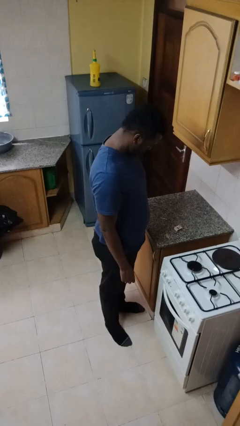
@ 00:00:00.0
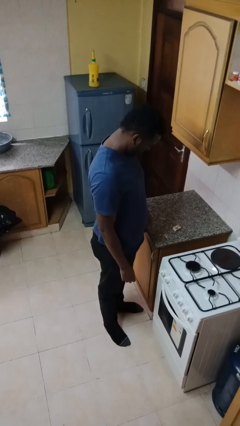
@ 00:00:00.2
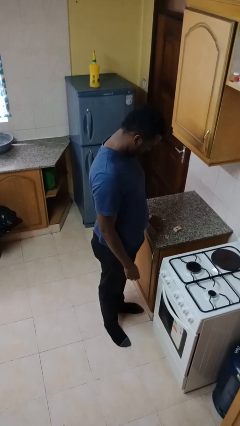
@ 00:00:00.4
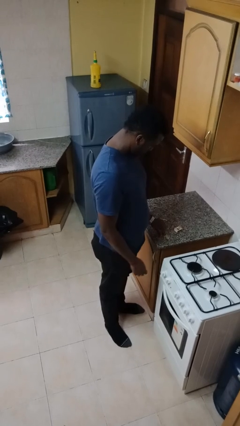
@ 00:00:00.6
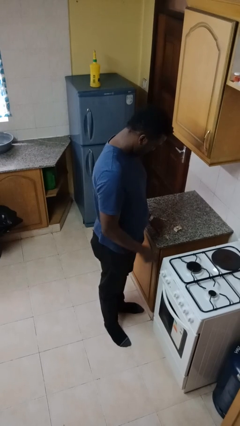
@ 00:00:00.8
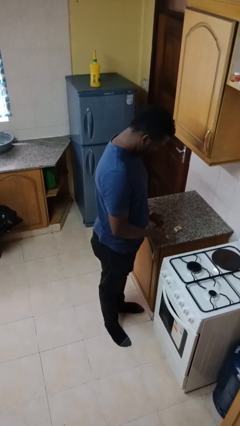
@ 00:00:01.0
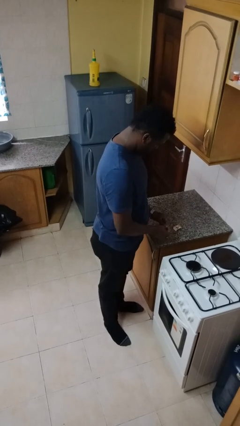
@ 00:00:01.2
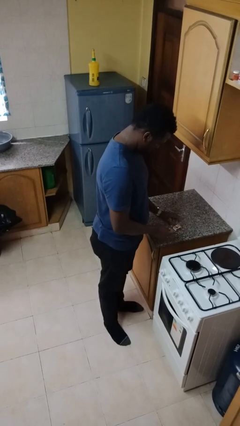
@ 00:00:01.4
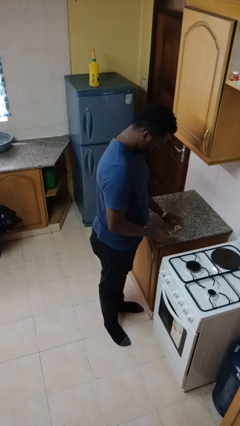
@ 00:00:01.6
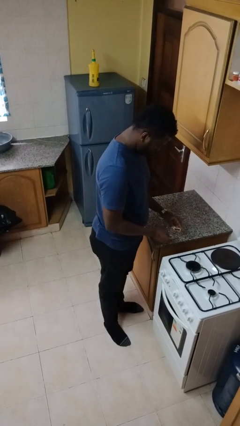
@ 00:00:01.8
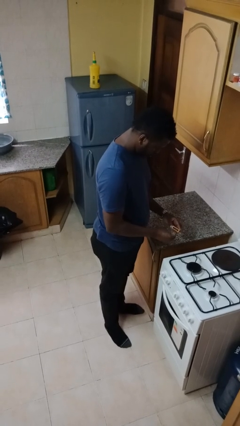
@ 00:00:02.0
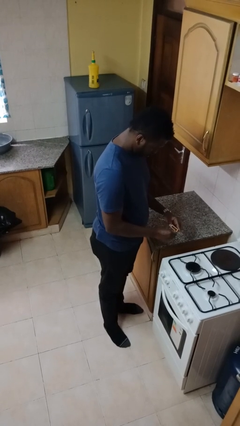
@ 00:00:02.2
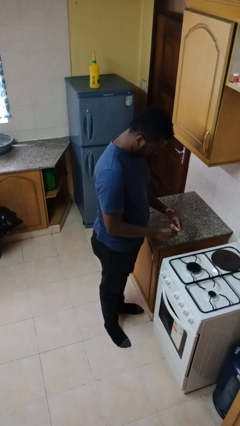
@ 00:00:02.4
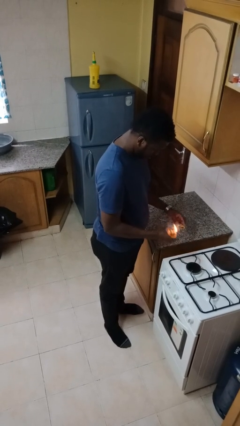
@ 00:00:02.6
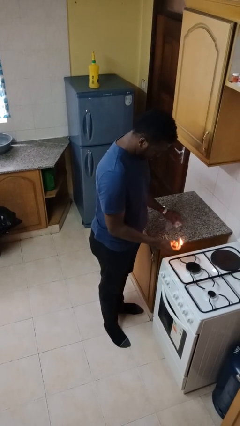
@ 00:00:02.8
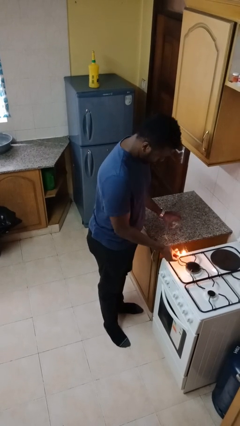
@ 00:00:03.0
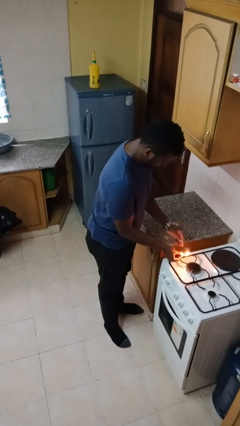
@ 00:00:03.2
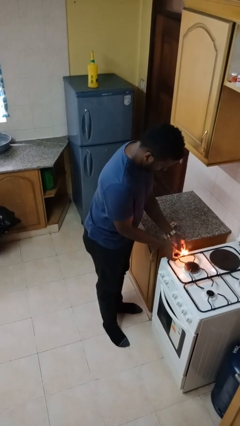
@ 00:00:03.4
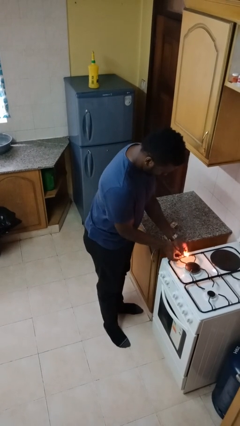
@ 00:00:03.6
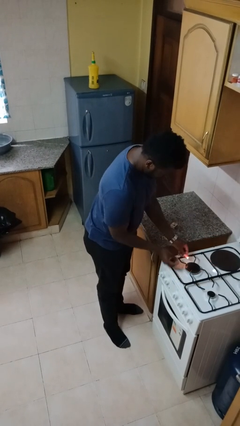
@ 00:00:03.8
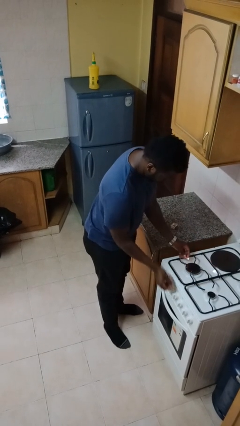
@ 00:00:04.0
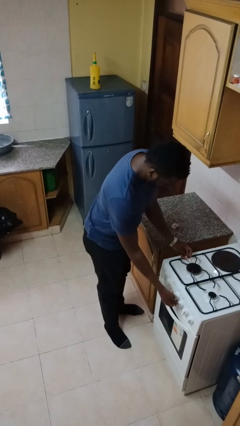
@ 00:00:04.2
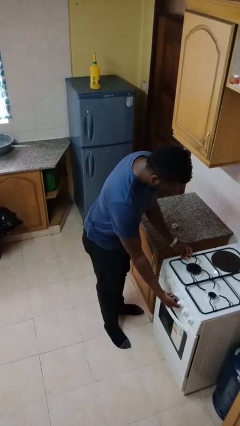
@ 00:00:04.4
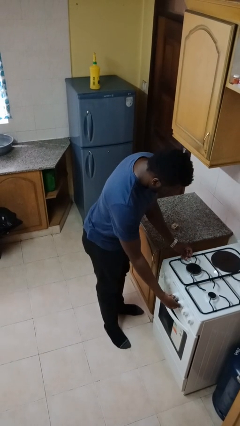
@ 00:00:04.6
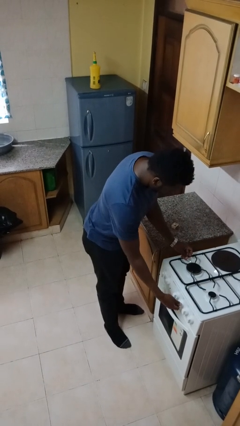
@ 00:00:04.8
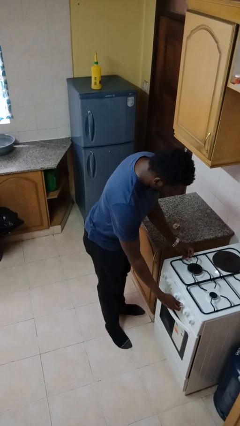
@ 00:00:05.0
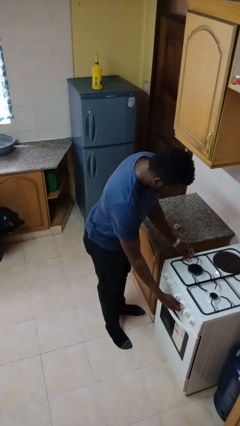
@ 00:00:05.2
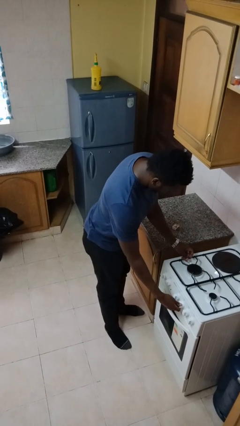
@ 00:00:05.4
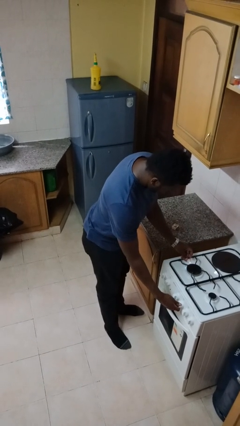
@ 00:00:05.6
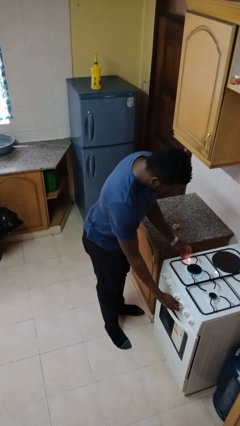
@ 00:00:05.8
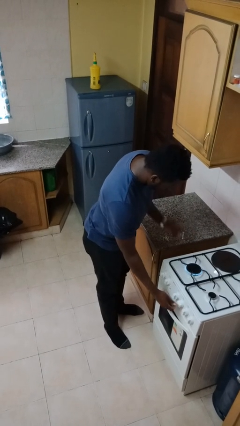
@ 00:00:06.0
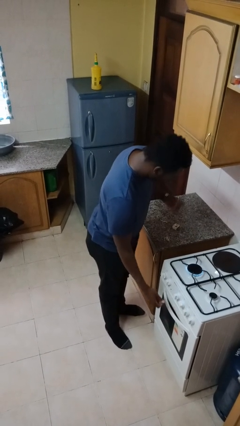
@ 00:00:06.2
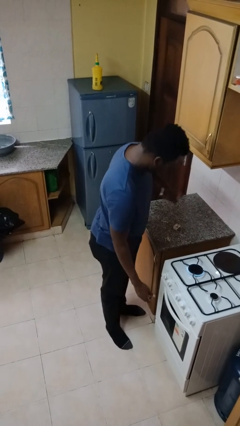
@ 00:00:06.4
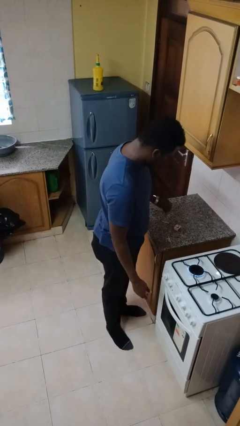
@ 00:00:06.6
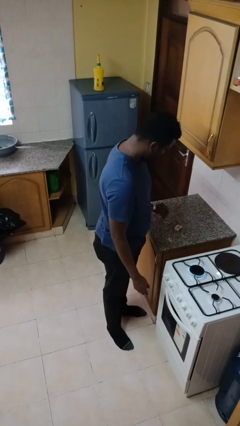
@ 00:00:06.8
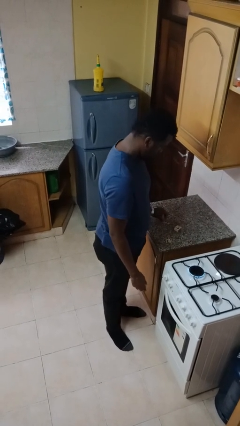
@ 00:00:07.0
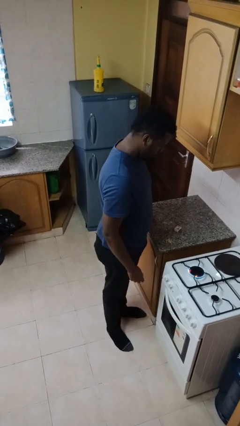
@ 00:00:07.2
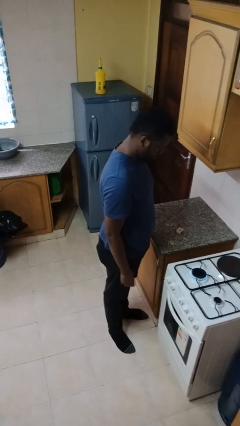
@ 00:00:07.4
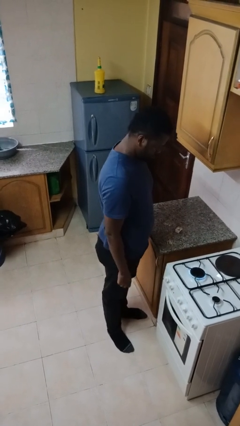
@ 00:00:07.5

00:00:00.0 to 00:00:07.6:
person turns on stovetop

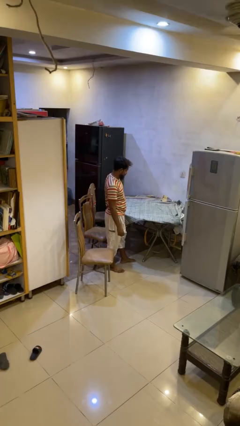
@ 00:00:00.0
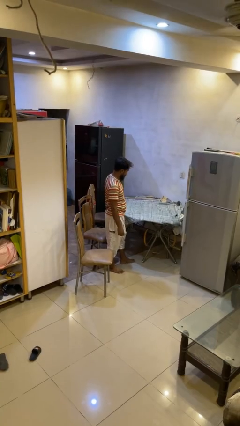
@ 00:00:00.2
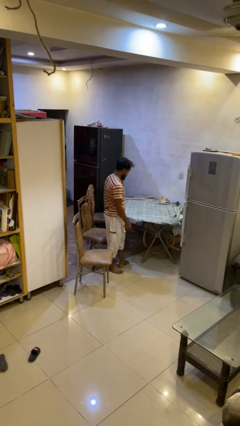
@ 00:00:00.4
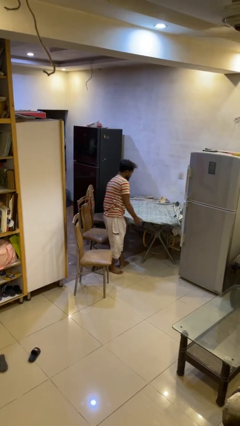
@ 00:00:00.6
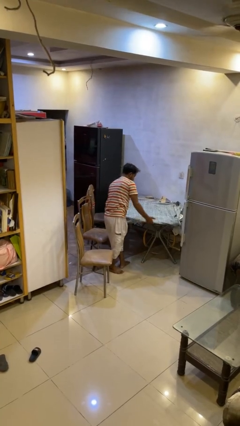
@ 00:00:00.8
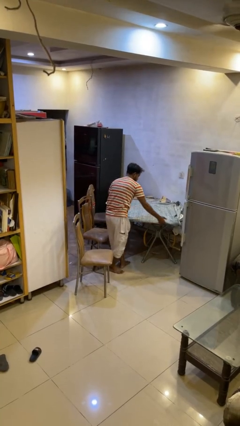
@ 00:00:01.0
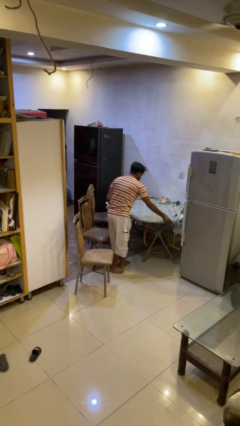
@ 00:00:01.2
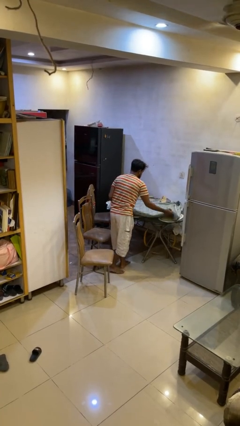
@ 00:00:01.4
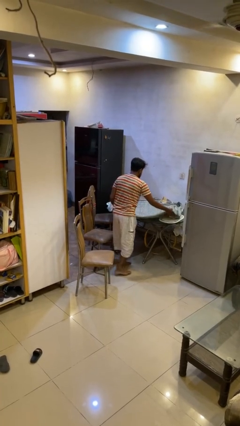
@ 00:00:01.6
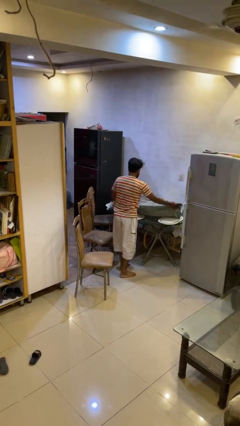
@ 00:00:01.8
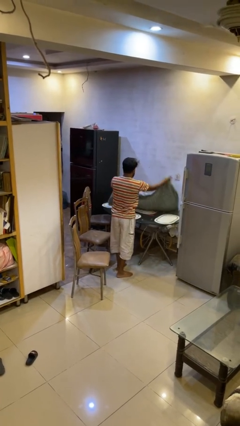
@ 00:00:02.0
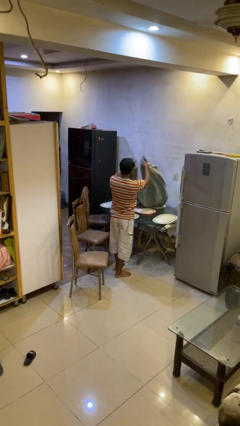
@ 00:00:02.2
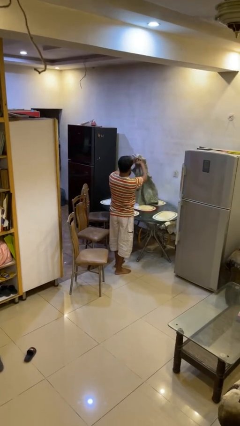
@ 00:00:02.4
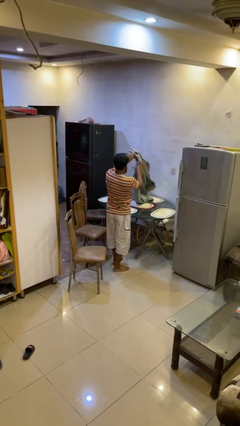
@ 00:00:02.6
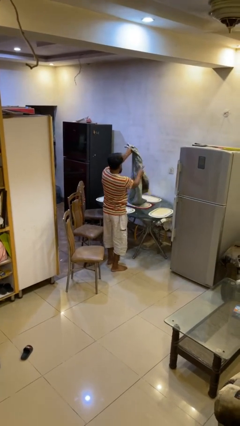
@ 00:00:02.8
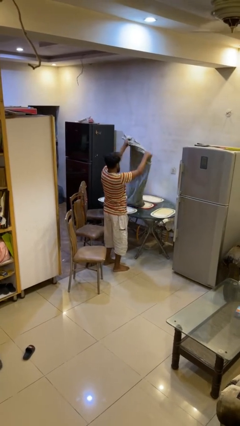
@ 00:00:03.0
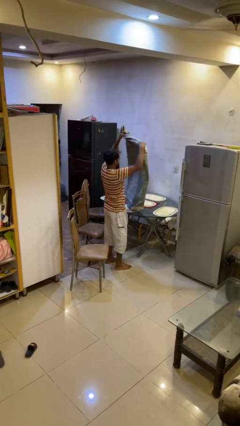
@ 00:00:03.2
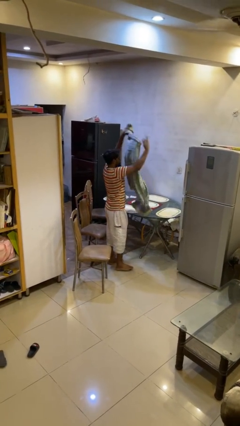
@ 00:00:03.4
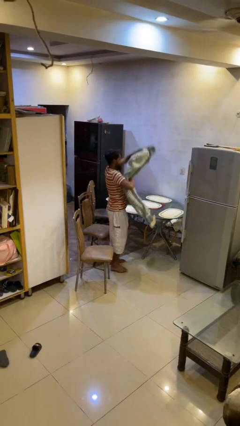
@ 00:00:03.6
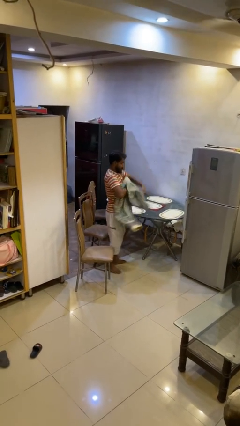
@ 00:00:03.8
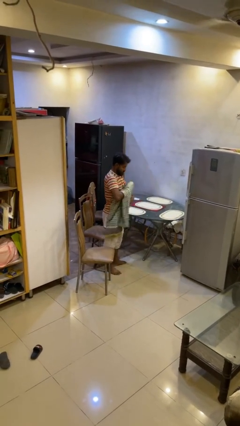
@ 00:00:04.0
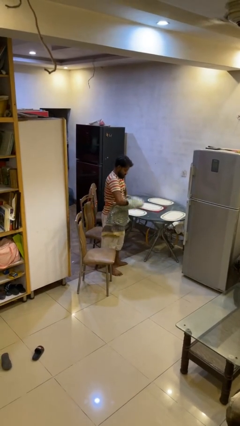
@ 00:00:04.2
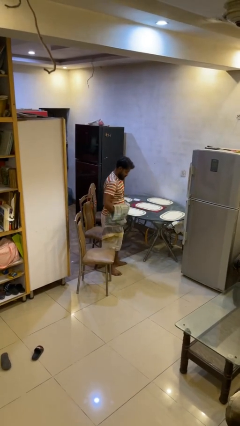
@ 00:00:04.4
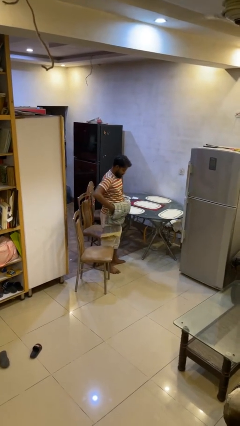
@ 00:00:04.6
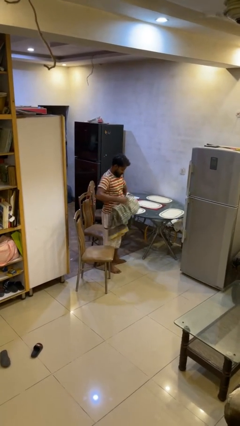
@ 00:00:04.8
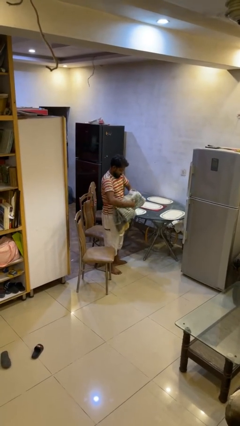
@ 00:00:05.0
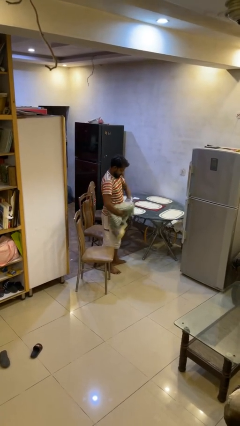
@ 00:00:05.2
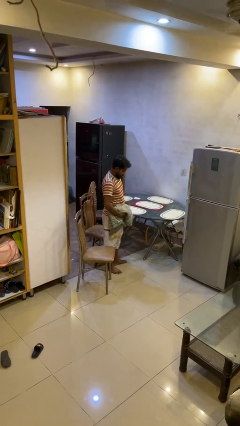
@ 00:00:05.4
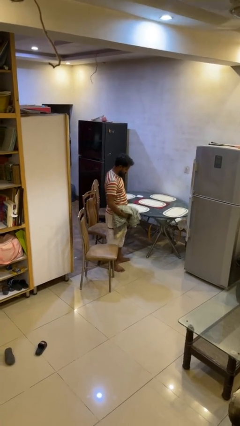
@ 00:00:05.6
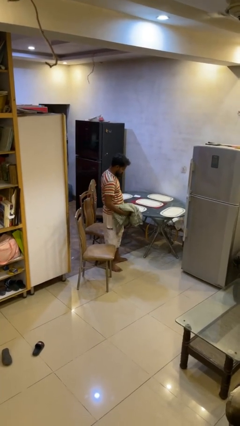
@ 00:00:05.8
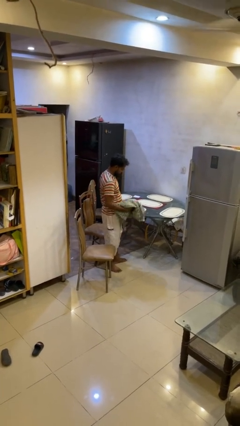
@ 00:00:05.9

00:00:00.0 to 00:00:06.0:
person folds tablecloth

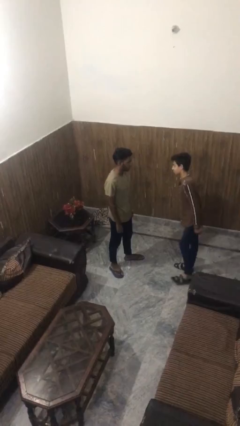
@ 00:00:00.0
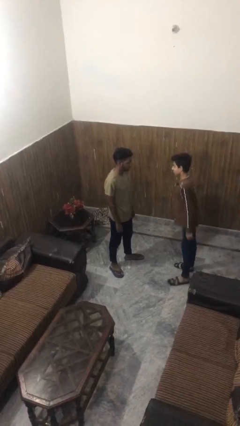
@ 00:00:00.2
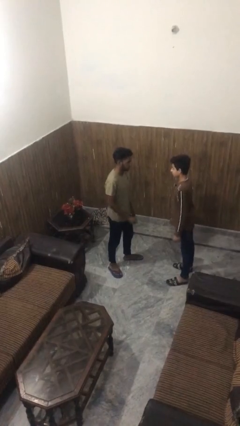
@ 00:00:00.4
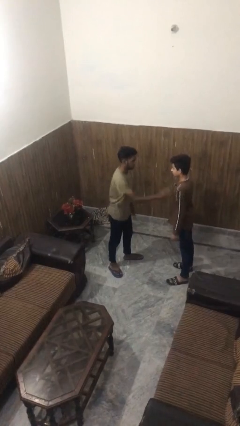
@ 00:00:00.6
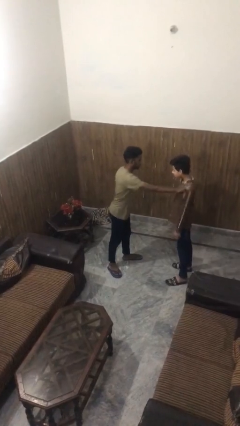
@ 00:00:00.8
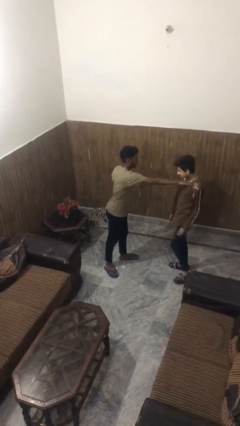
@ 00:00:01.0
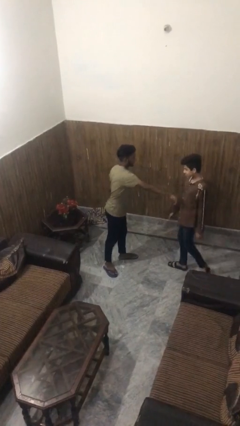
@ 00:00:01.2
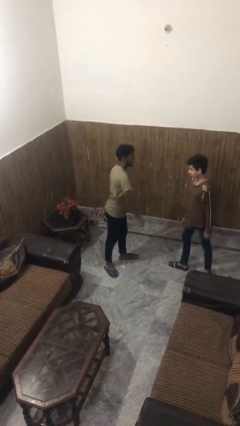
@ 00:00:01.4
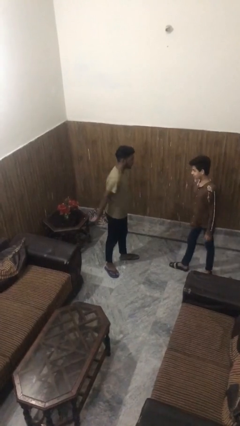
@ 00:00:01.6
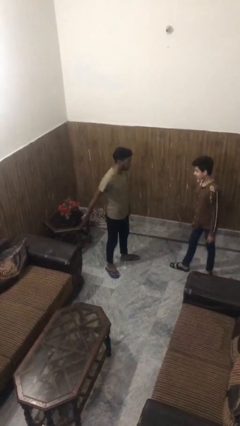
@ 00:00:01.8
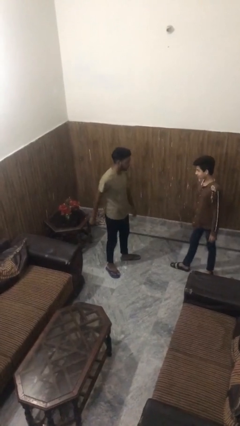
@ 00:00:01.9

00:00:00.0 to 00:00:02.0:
person shoves person

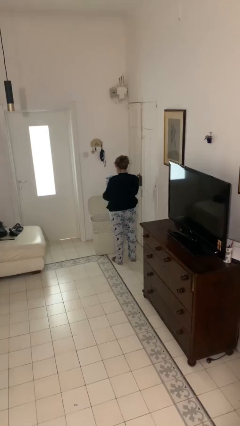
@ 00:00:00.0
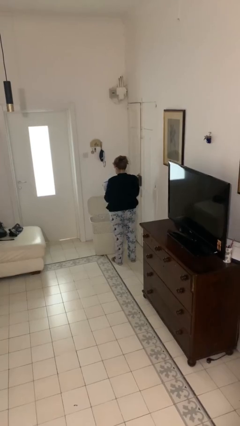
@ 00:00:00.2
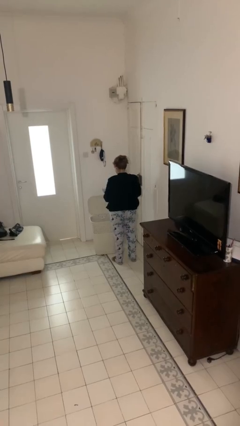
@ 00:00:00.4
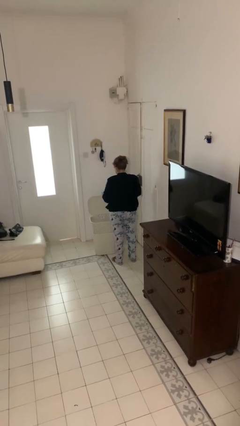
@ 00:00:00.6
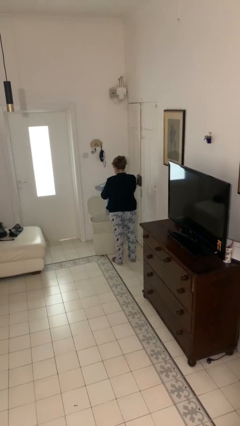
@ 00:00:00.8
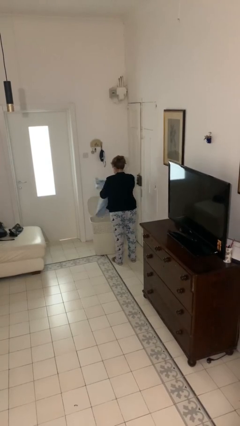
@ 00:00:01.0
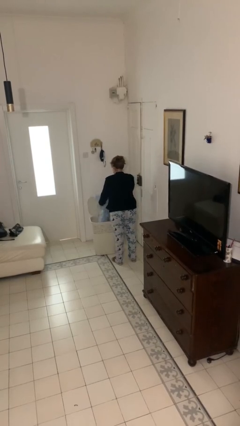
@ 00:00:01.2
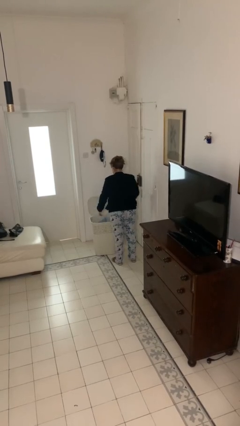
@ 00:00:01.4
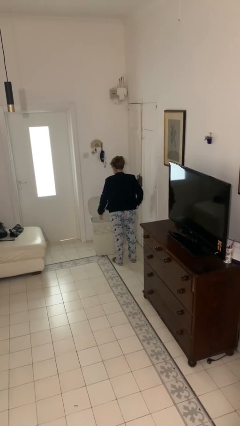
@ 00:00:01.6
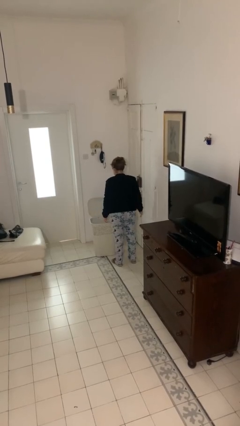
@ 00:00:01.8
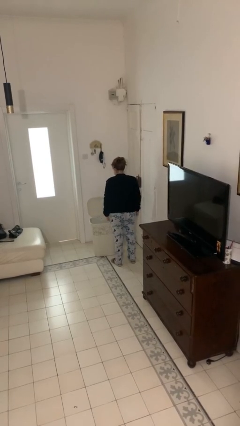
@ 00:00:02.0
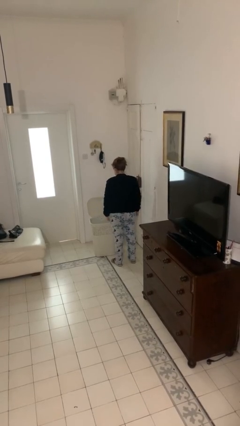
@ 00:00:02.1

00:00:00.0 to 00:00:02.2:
person puts object into basket
